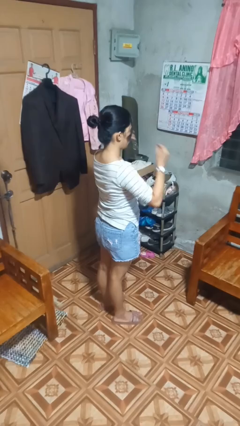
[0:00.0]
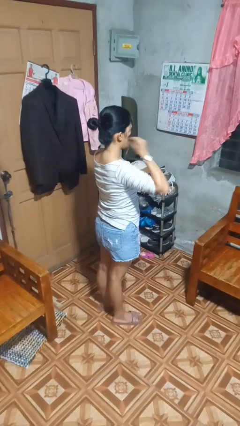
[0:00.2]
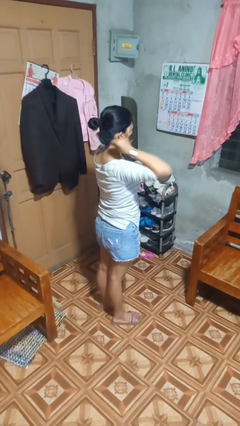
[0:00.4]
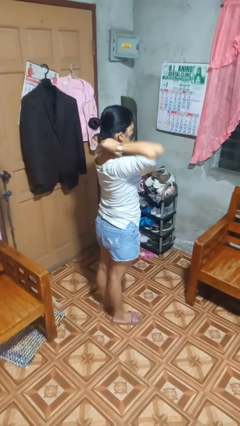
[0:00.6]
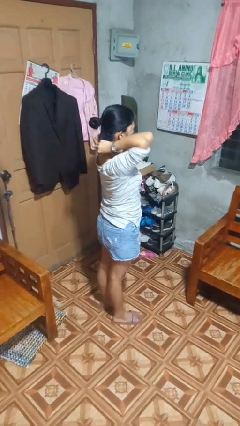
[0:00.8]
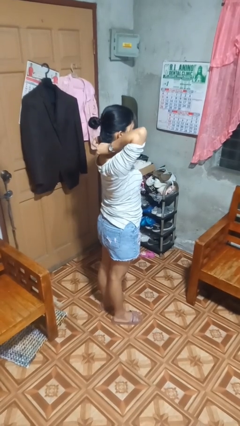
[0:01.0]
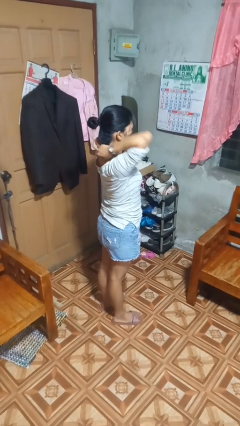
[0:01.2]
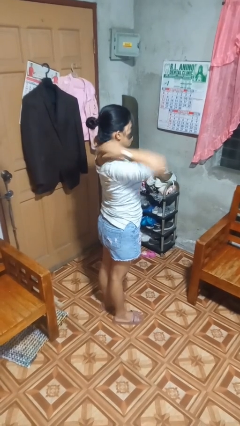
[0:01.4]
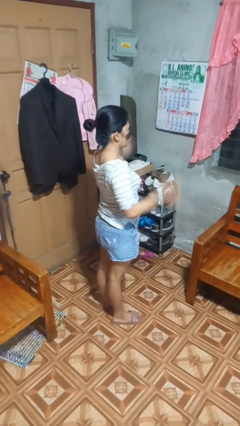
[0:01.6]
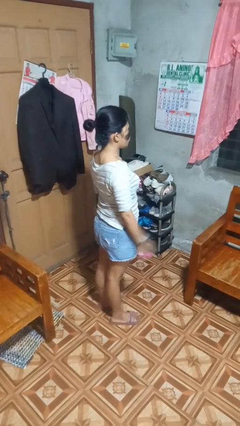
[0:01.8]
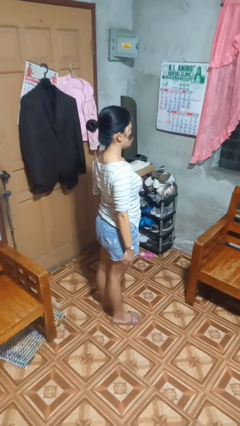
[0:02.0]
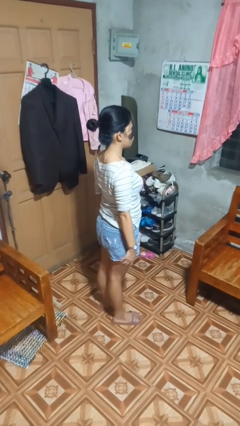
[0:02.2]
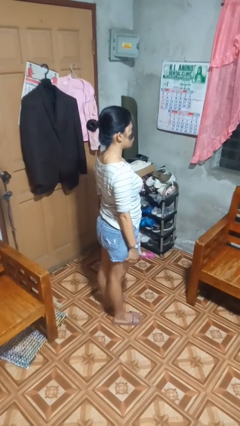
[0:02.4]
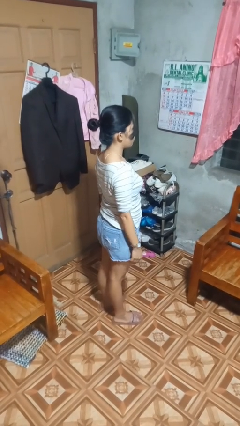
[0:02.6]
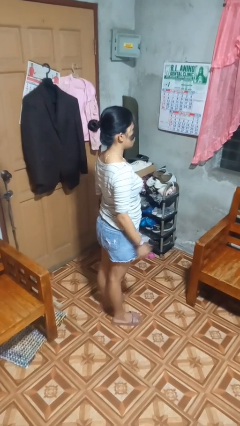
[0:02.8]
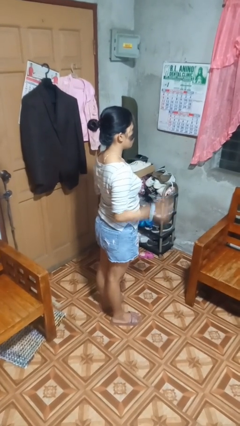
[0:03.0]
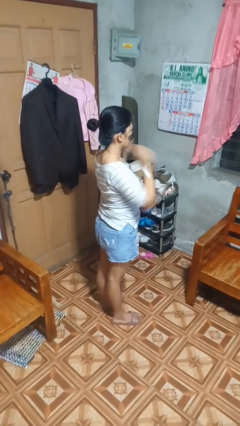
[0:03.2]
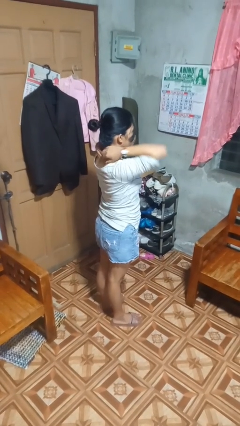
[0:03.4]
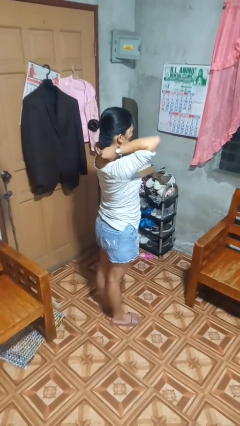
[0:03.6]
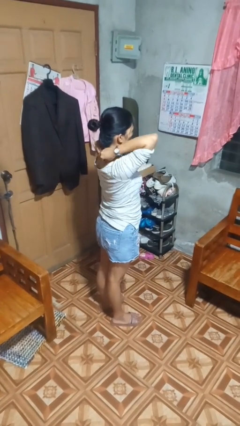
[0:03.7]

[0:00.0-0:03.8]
person puts on necklace

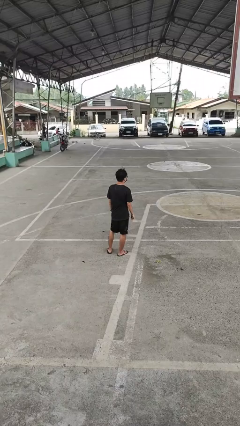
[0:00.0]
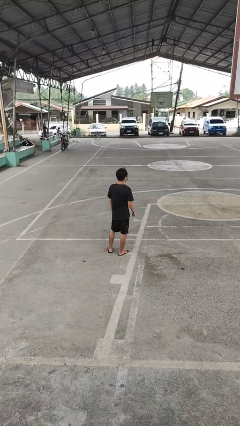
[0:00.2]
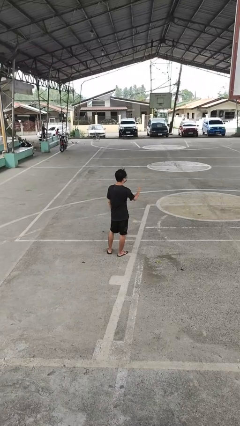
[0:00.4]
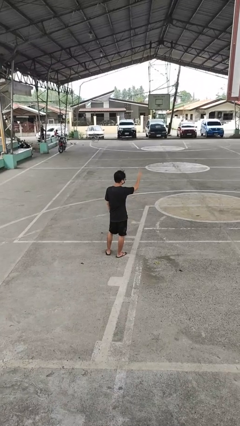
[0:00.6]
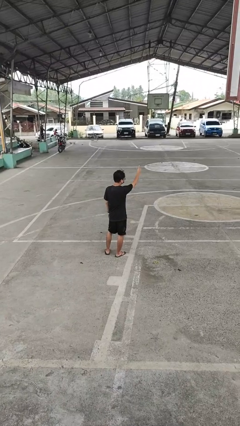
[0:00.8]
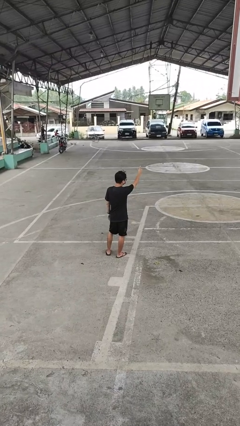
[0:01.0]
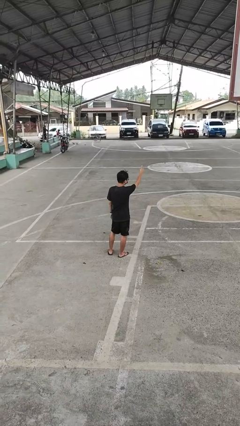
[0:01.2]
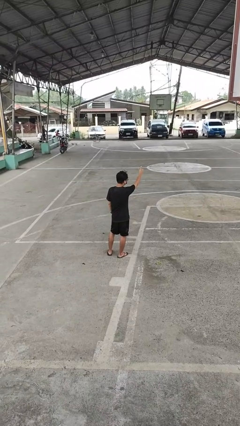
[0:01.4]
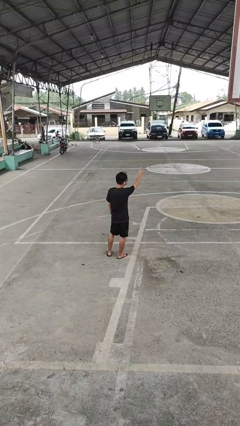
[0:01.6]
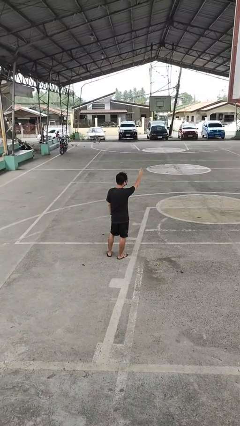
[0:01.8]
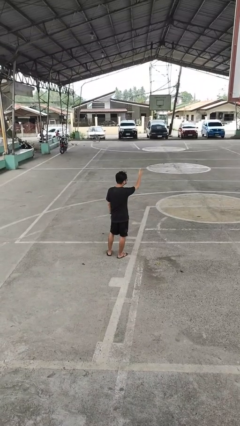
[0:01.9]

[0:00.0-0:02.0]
person gestures thumbs up

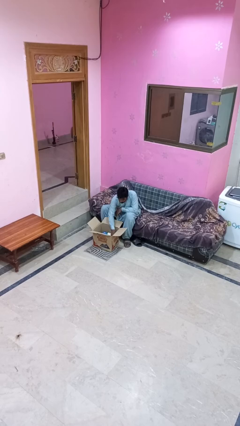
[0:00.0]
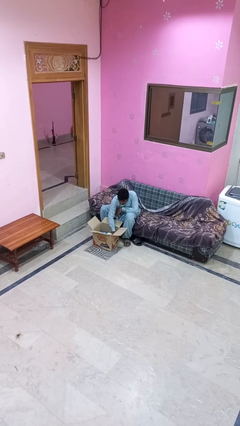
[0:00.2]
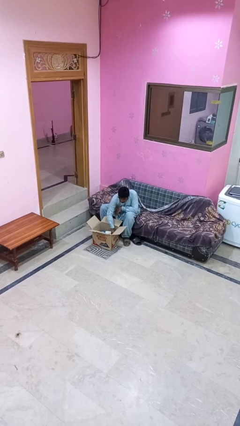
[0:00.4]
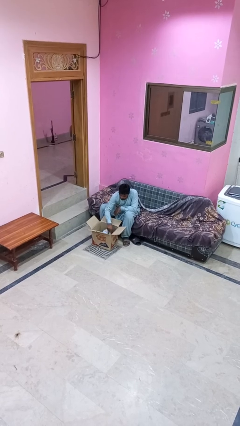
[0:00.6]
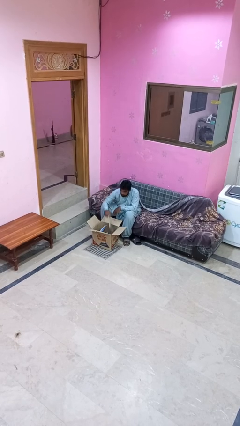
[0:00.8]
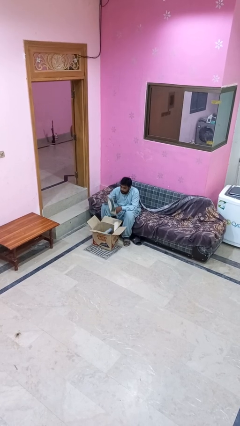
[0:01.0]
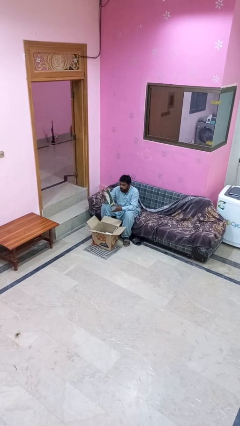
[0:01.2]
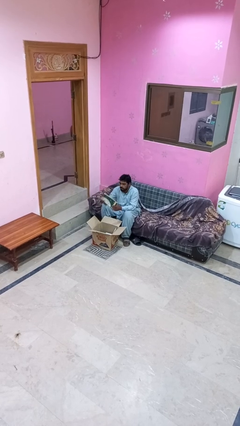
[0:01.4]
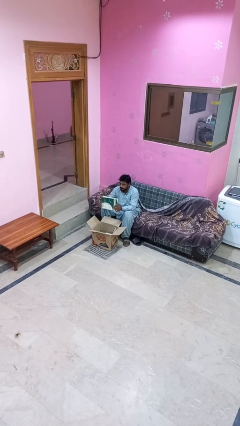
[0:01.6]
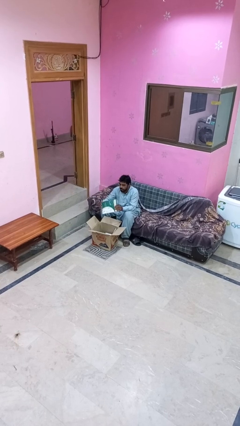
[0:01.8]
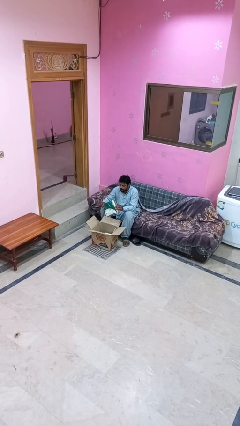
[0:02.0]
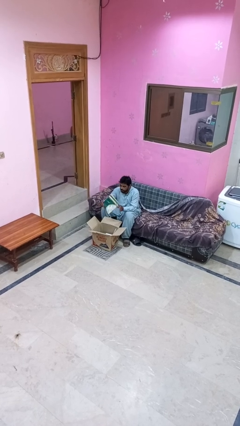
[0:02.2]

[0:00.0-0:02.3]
person takes object from box

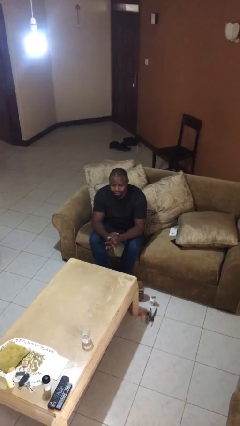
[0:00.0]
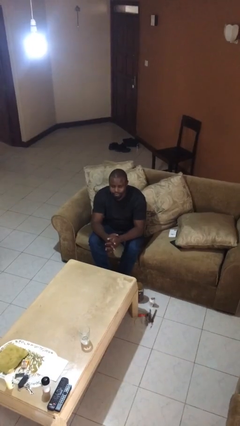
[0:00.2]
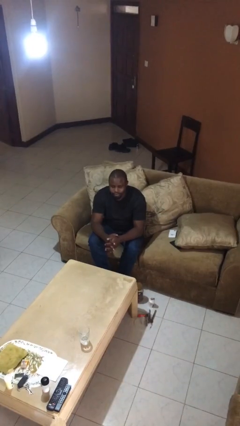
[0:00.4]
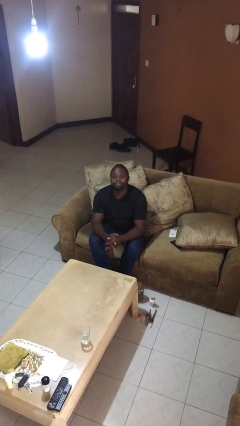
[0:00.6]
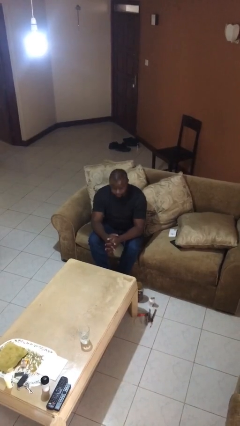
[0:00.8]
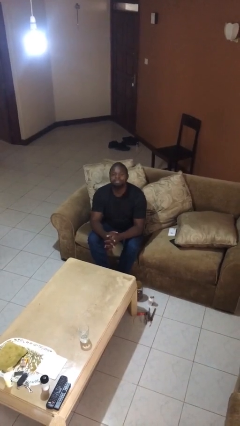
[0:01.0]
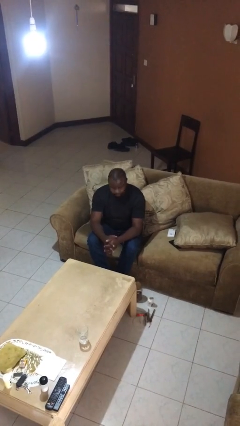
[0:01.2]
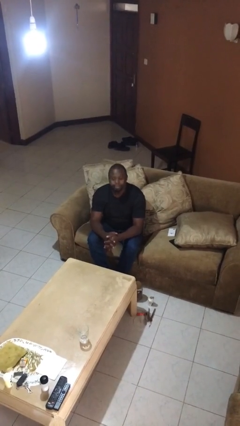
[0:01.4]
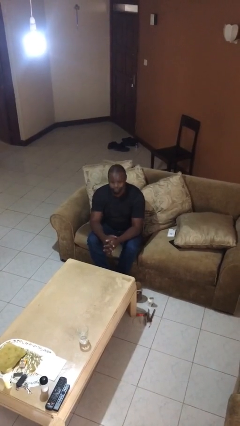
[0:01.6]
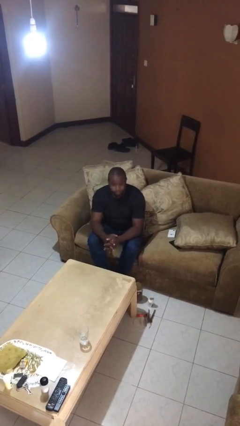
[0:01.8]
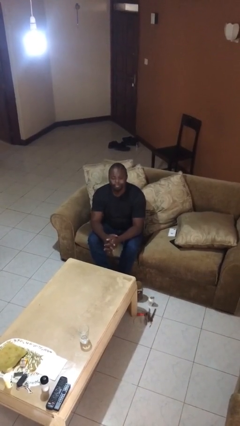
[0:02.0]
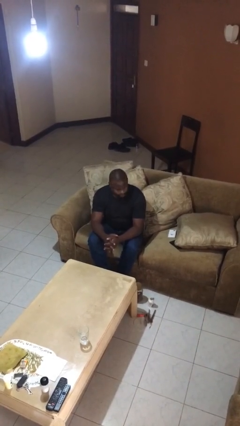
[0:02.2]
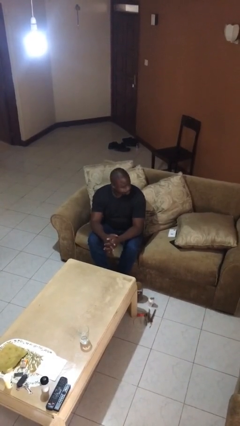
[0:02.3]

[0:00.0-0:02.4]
person nods head

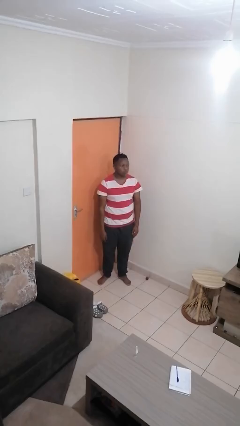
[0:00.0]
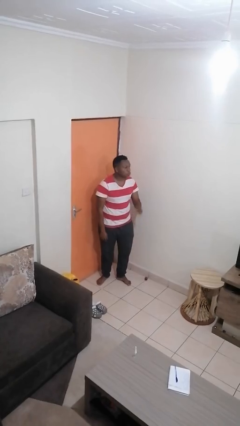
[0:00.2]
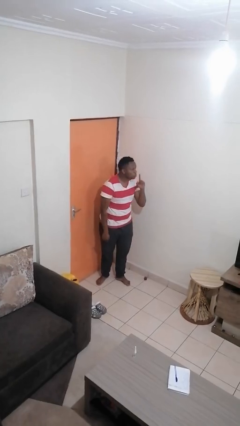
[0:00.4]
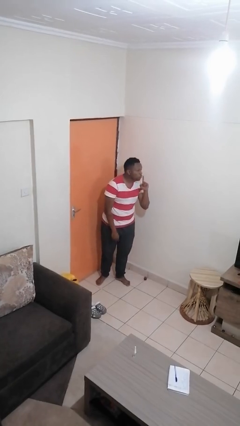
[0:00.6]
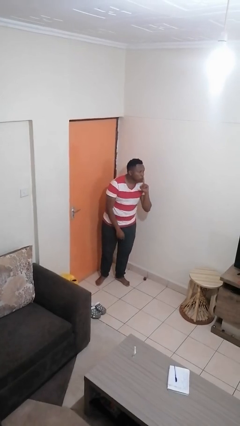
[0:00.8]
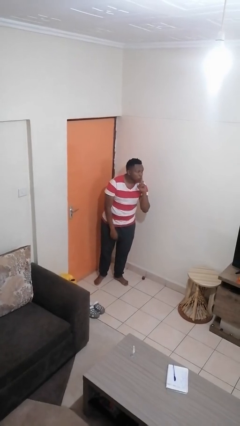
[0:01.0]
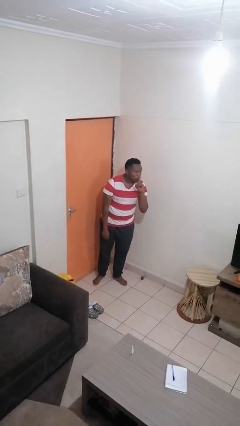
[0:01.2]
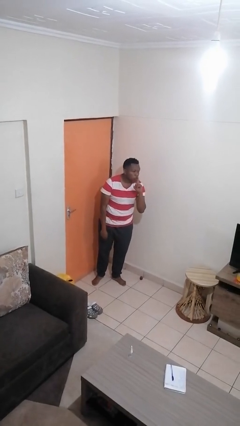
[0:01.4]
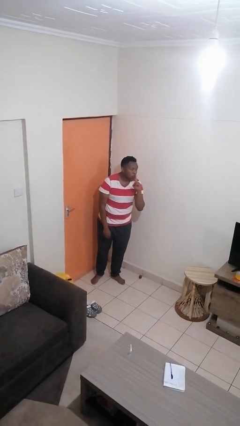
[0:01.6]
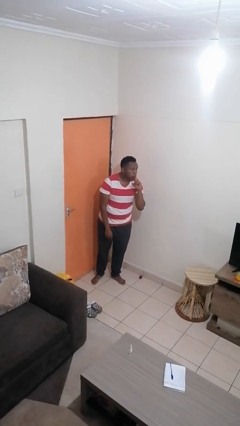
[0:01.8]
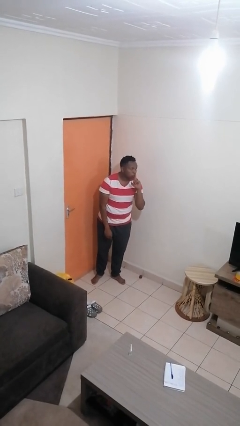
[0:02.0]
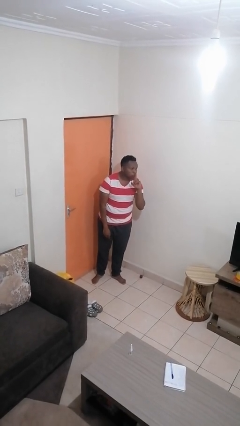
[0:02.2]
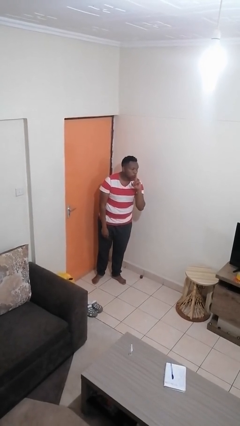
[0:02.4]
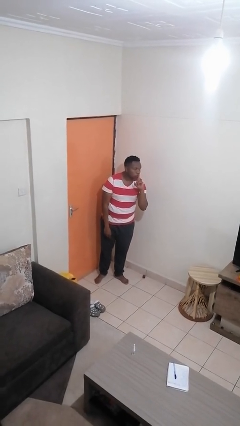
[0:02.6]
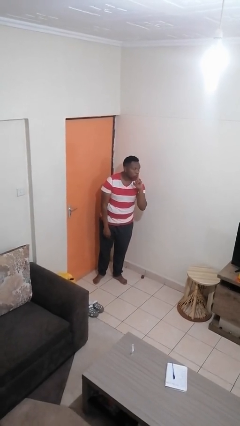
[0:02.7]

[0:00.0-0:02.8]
person gestures be quiet

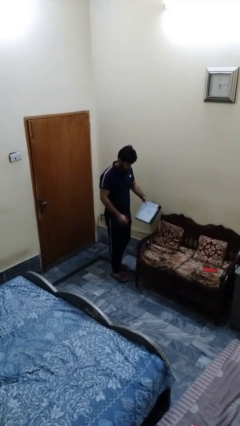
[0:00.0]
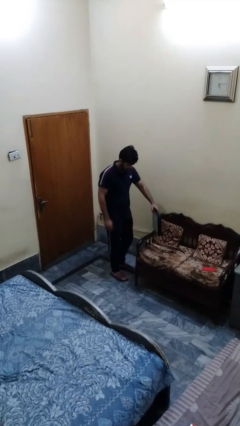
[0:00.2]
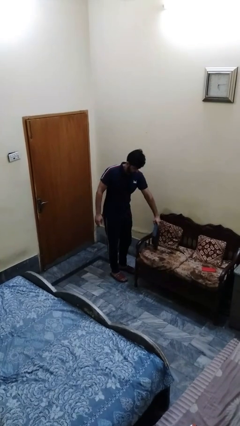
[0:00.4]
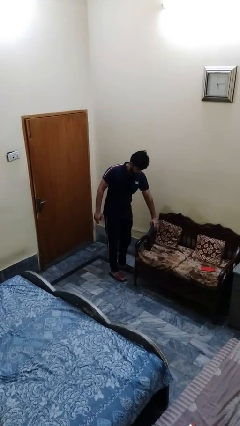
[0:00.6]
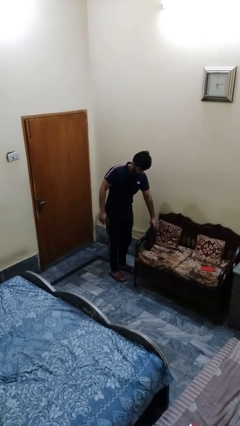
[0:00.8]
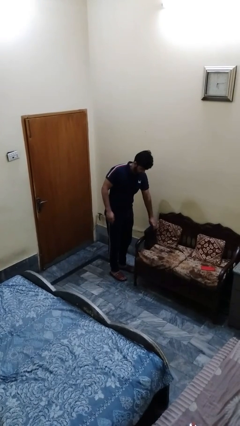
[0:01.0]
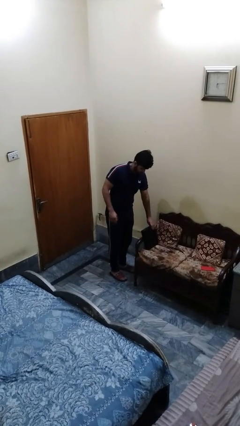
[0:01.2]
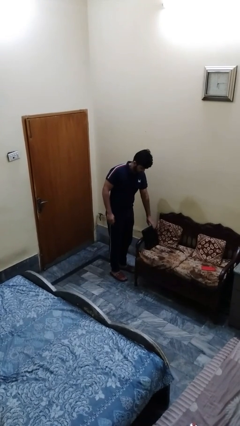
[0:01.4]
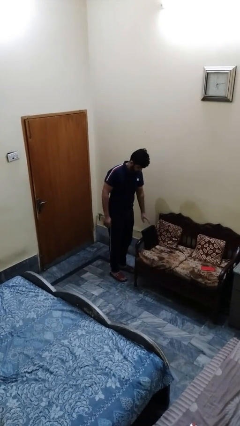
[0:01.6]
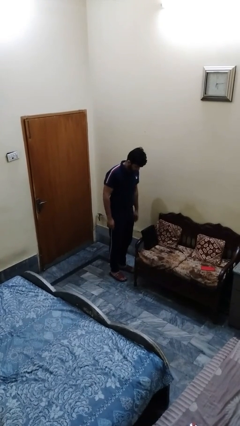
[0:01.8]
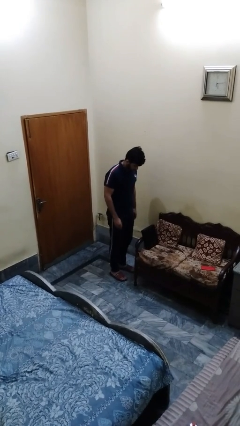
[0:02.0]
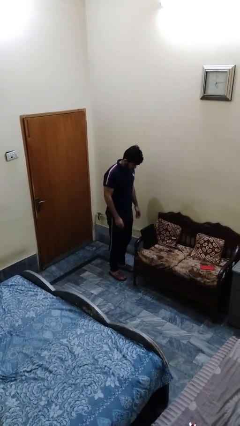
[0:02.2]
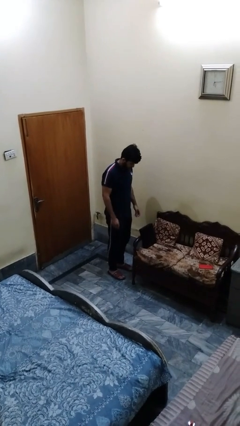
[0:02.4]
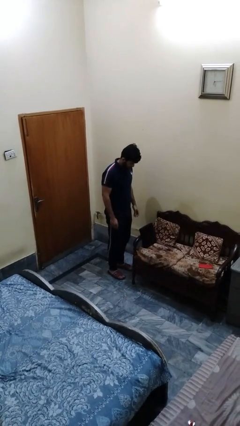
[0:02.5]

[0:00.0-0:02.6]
person puts down object on couch

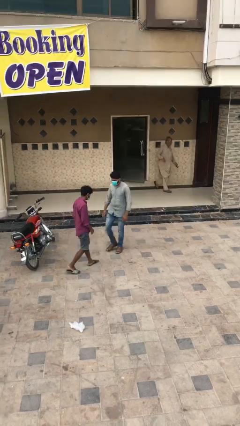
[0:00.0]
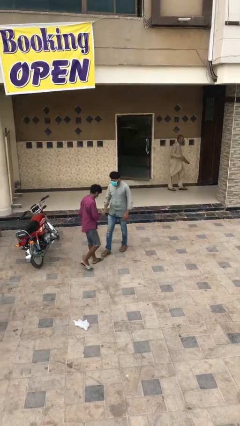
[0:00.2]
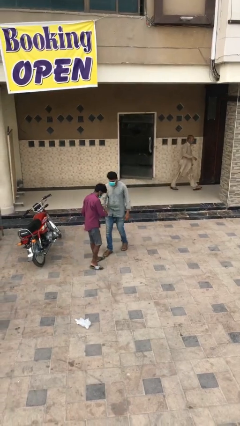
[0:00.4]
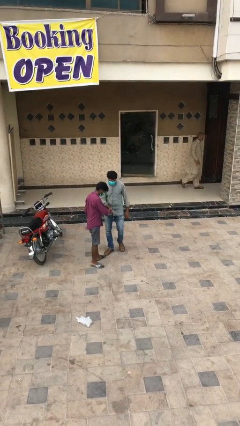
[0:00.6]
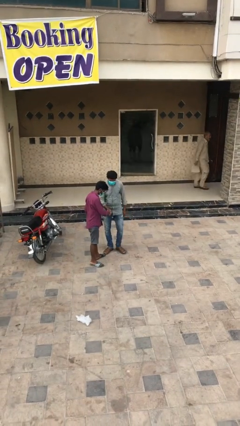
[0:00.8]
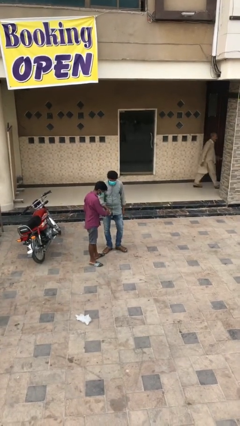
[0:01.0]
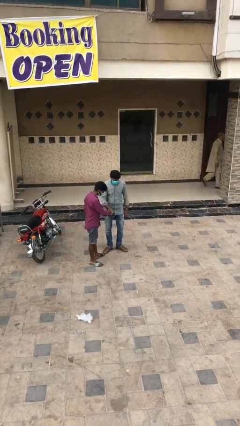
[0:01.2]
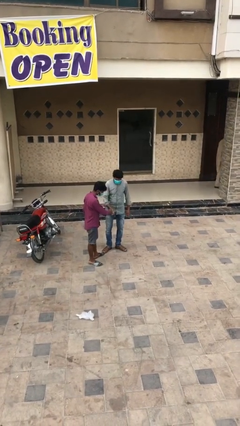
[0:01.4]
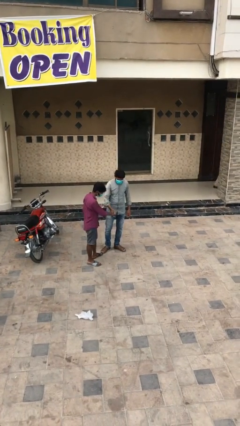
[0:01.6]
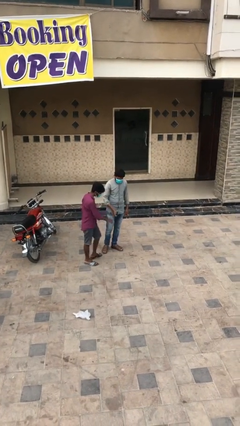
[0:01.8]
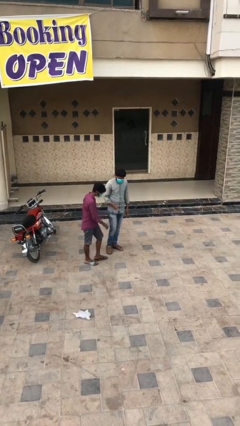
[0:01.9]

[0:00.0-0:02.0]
person shakes hand
